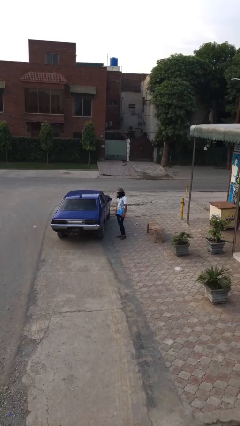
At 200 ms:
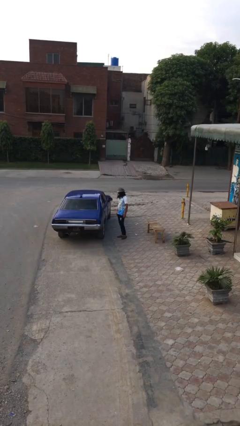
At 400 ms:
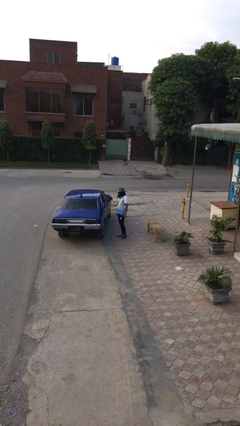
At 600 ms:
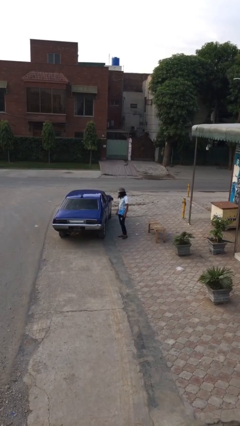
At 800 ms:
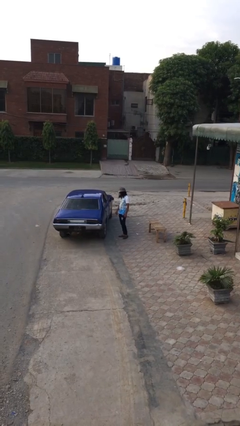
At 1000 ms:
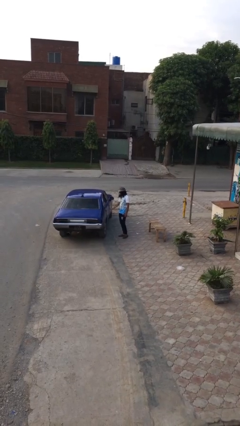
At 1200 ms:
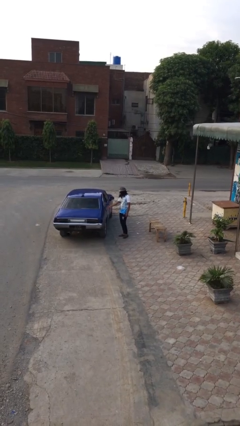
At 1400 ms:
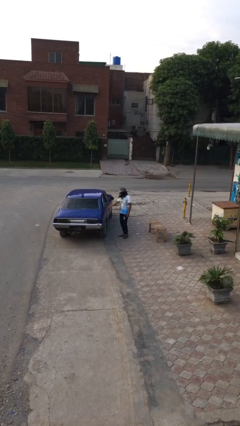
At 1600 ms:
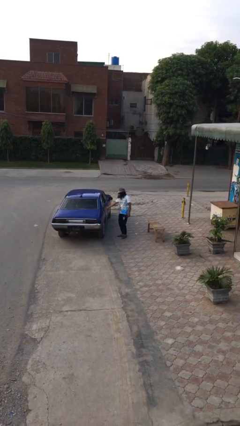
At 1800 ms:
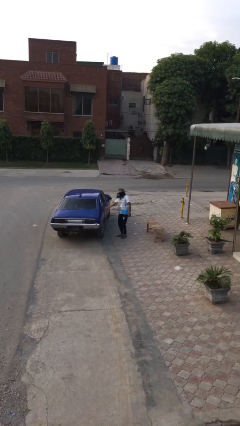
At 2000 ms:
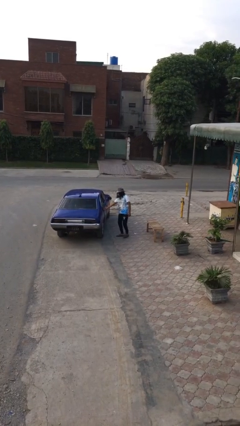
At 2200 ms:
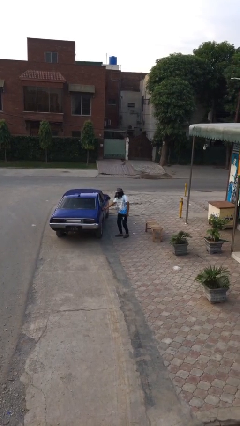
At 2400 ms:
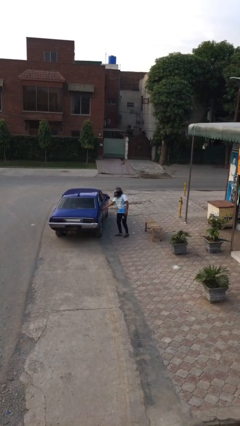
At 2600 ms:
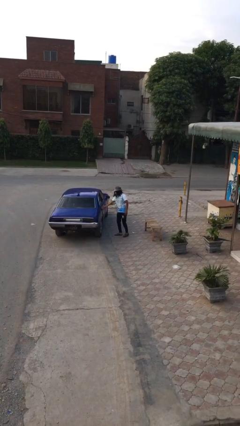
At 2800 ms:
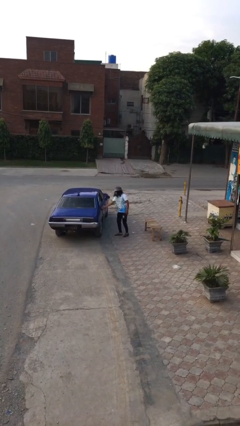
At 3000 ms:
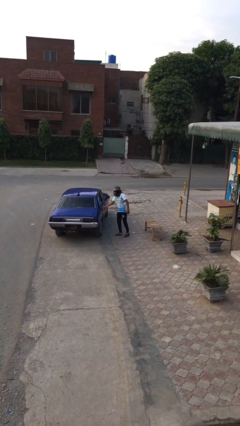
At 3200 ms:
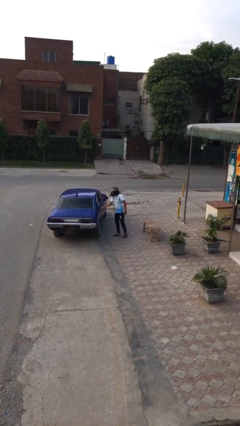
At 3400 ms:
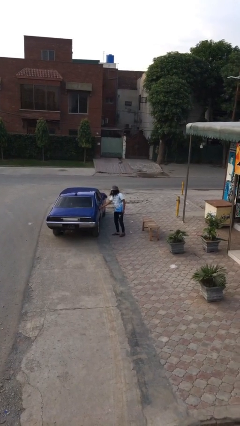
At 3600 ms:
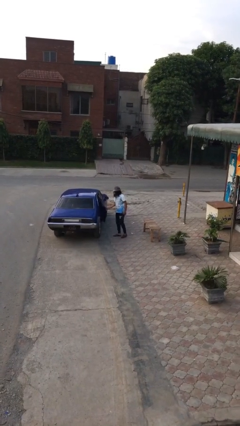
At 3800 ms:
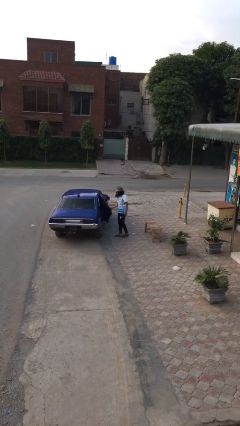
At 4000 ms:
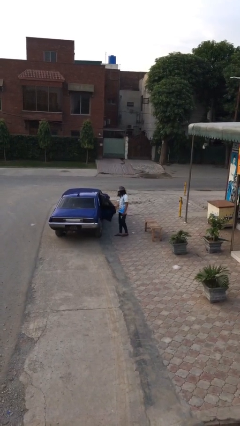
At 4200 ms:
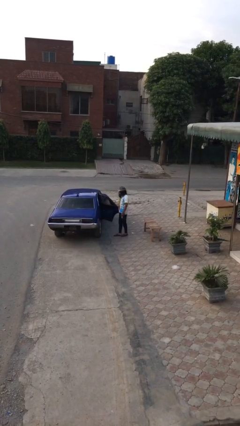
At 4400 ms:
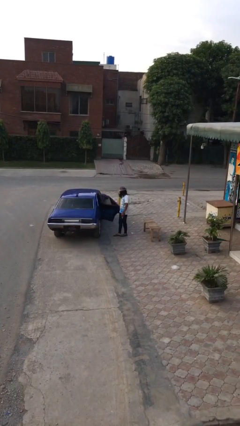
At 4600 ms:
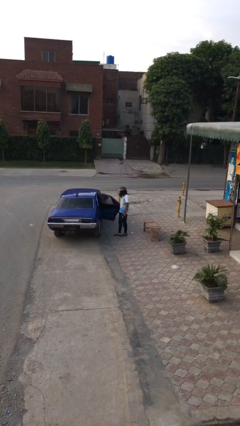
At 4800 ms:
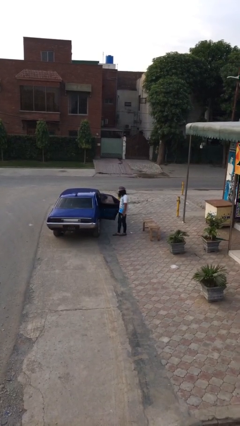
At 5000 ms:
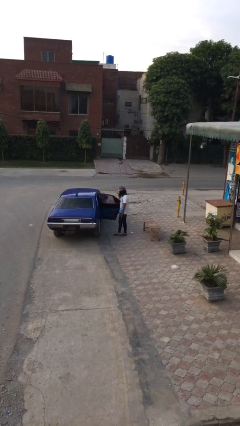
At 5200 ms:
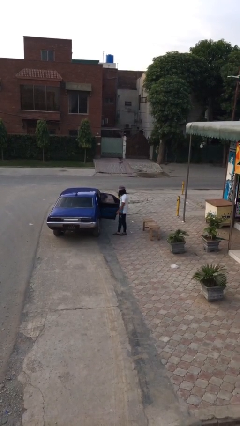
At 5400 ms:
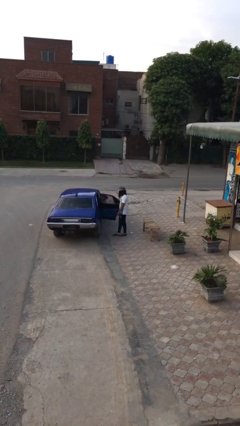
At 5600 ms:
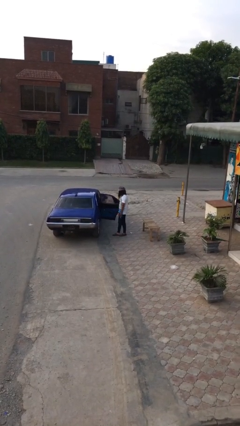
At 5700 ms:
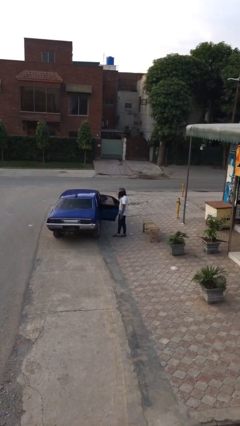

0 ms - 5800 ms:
person opens car door

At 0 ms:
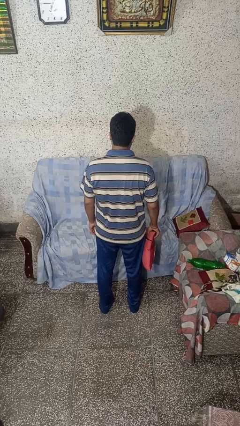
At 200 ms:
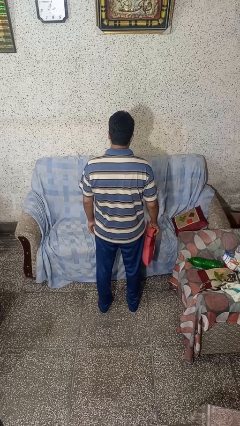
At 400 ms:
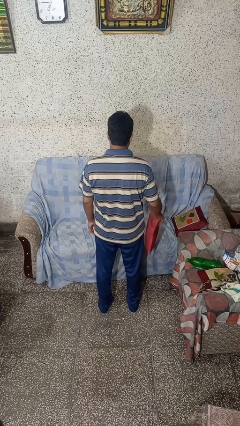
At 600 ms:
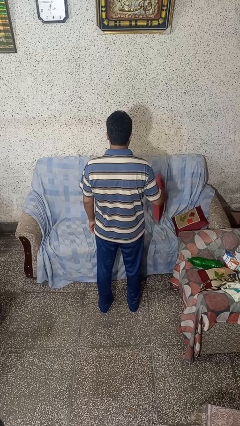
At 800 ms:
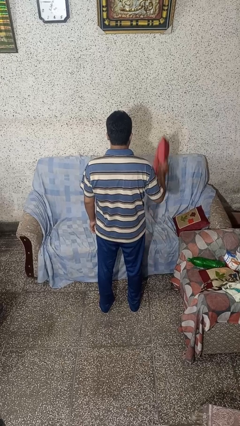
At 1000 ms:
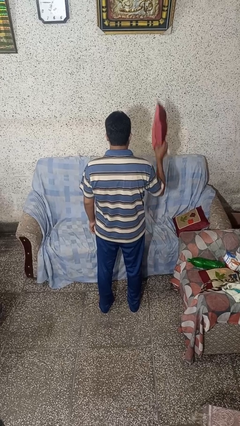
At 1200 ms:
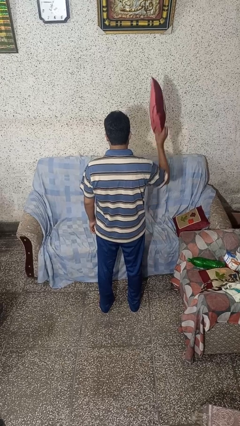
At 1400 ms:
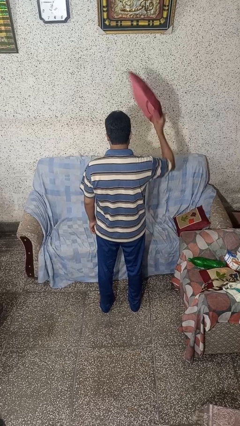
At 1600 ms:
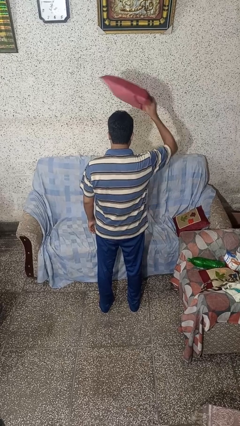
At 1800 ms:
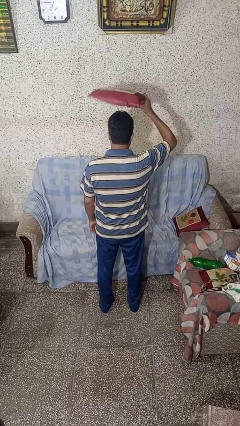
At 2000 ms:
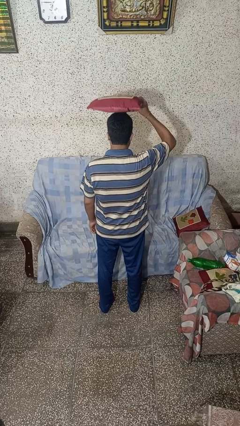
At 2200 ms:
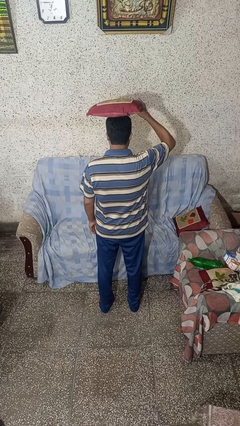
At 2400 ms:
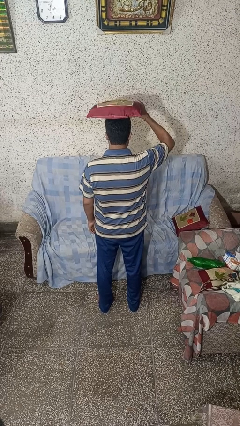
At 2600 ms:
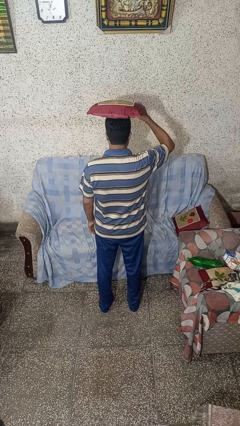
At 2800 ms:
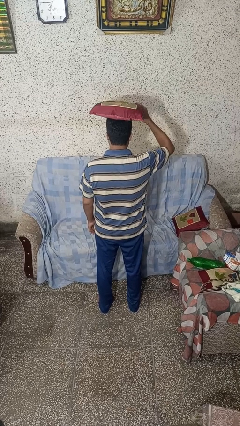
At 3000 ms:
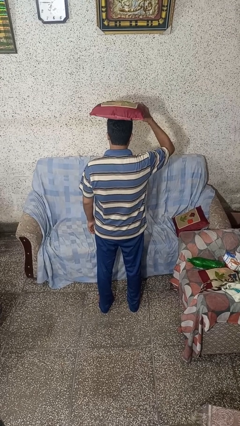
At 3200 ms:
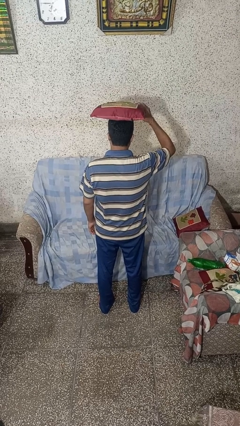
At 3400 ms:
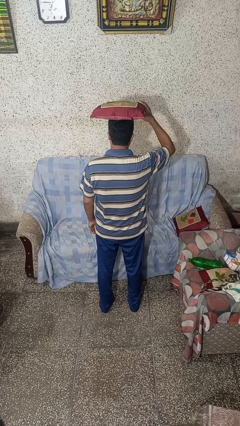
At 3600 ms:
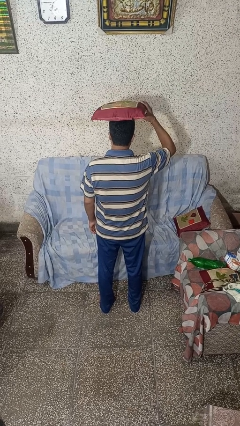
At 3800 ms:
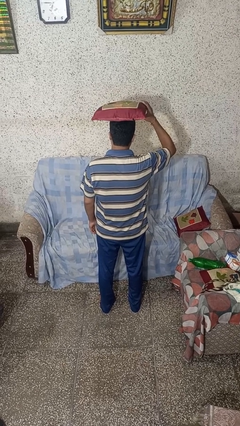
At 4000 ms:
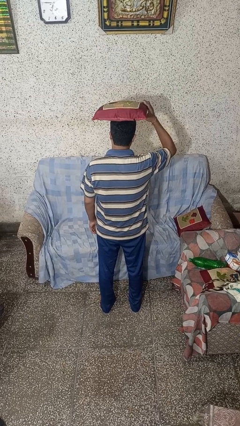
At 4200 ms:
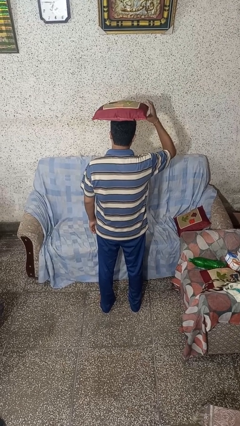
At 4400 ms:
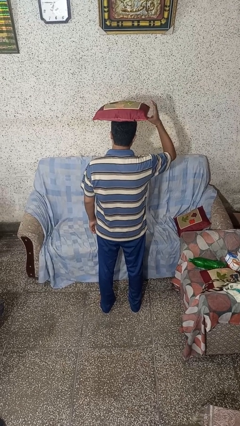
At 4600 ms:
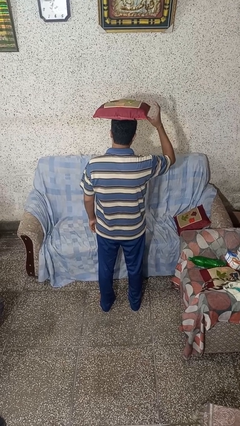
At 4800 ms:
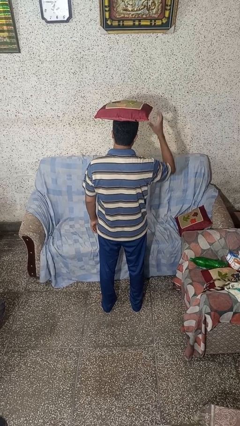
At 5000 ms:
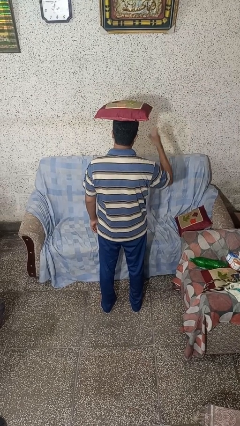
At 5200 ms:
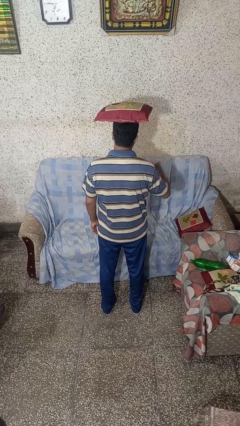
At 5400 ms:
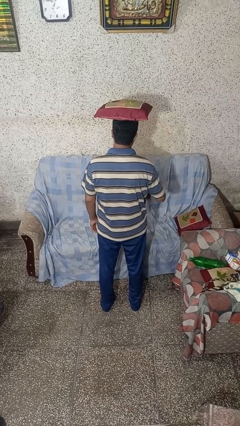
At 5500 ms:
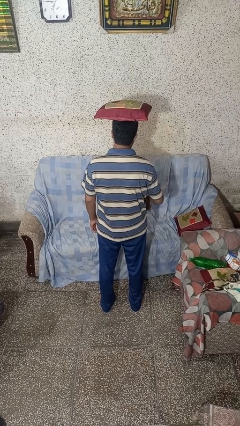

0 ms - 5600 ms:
person holds object above head

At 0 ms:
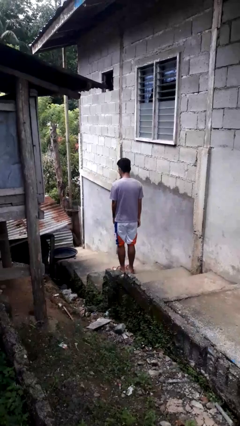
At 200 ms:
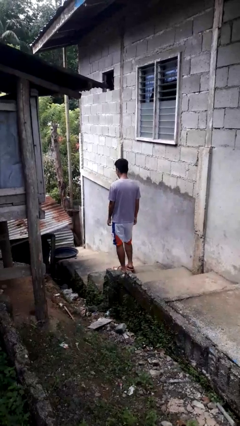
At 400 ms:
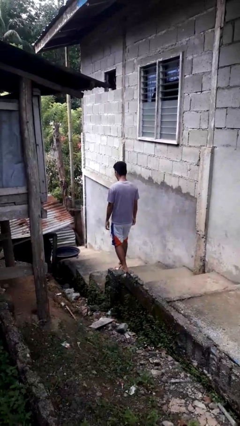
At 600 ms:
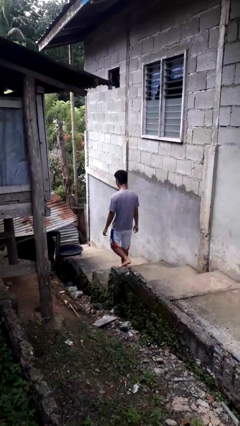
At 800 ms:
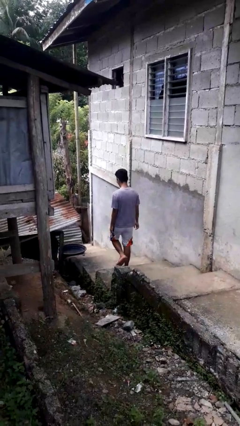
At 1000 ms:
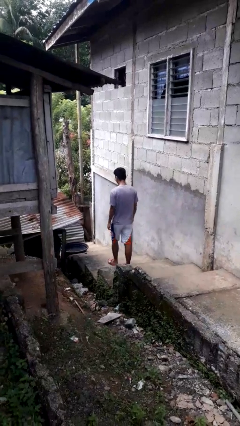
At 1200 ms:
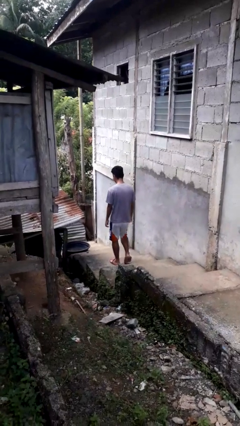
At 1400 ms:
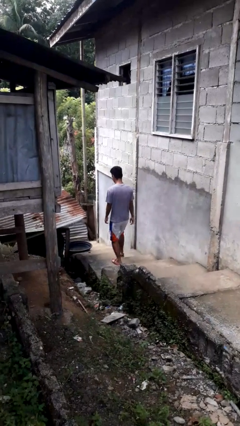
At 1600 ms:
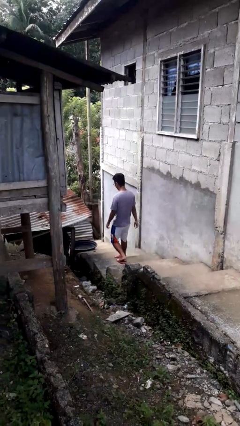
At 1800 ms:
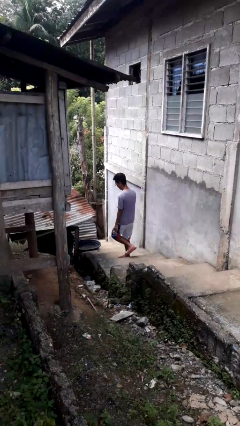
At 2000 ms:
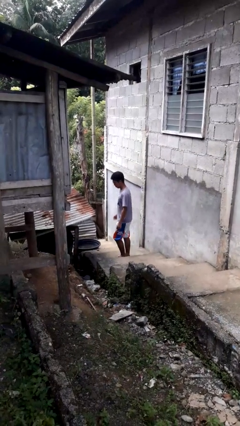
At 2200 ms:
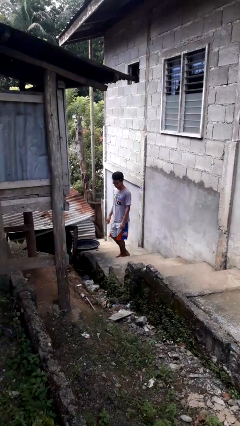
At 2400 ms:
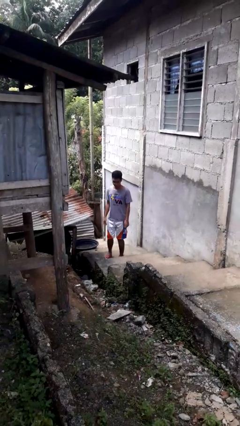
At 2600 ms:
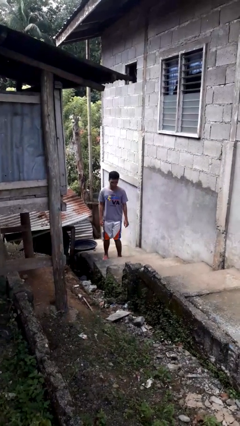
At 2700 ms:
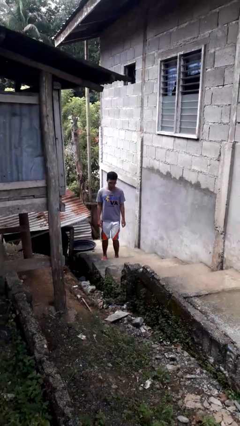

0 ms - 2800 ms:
person climbs down stairs

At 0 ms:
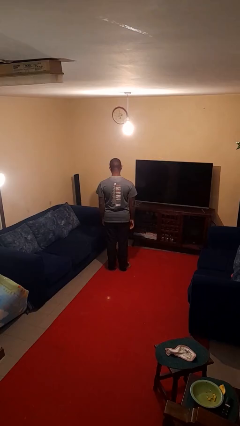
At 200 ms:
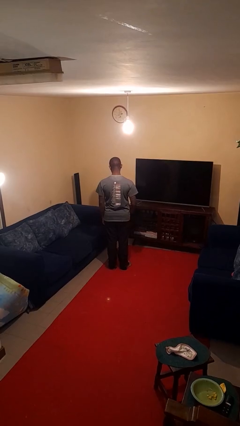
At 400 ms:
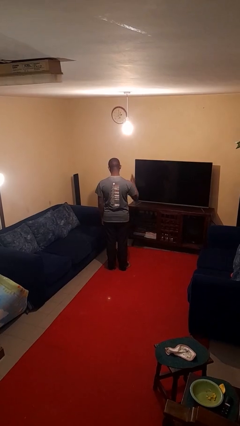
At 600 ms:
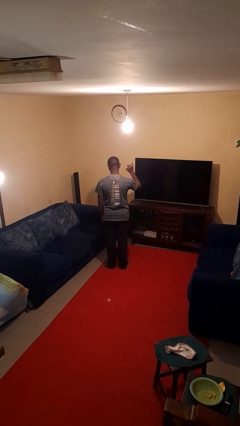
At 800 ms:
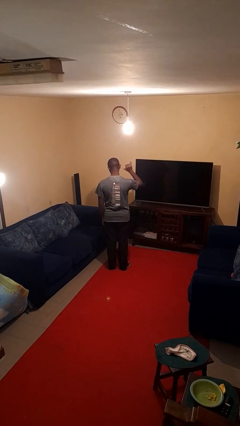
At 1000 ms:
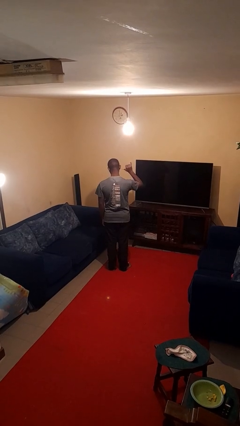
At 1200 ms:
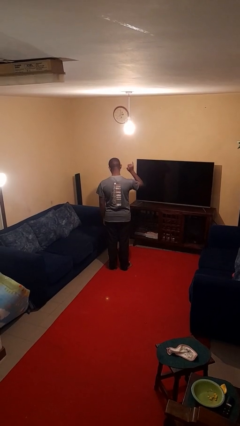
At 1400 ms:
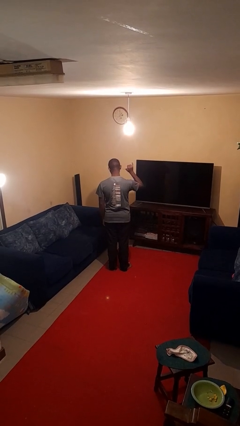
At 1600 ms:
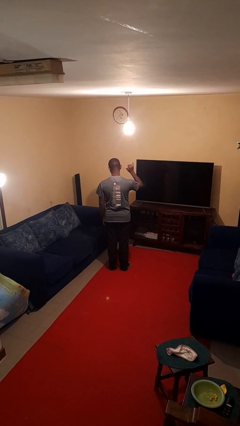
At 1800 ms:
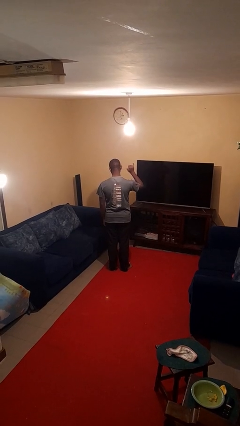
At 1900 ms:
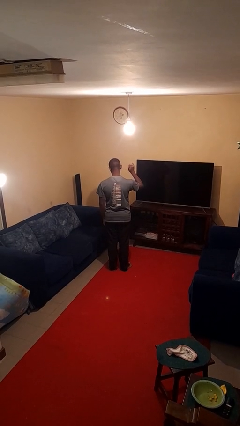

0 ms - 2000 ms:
person gestures hang loose

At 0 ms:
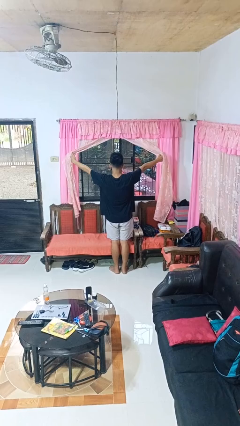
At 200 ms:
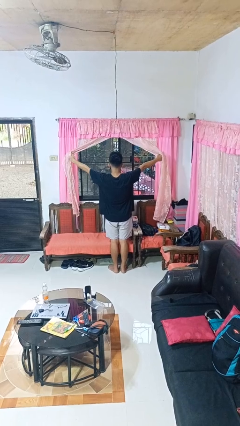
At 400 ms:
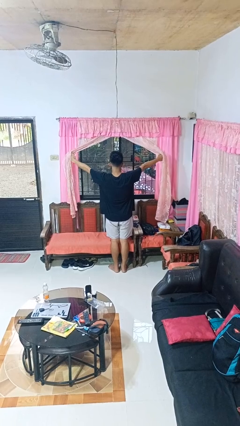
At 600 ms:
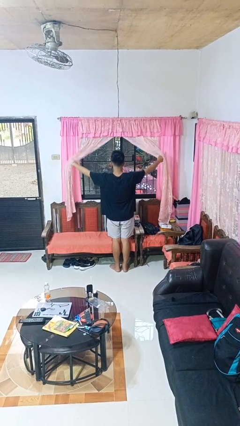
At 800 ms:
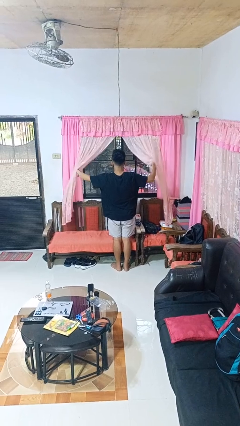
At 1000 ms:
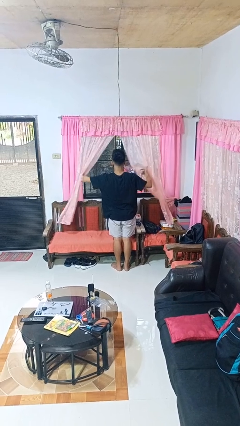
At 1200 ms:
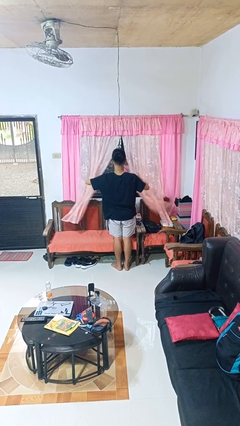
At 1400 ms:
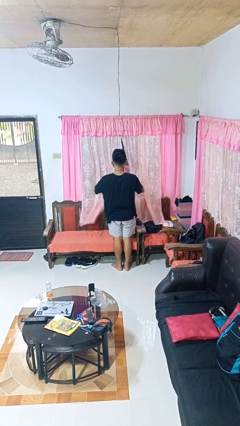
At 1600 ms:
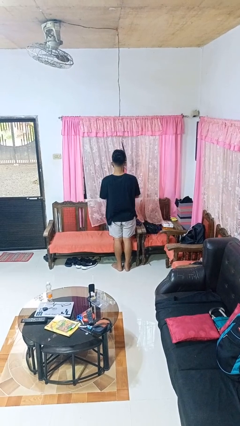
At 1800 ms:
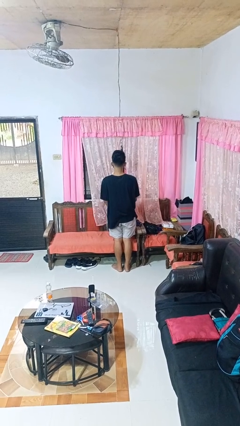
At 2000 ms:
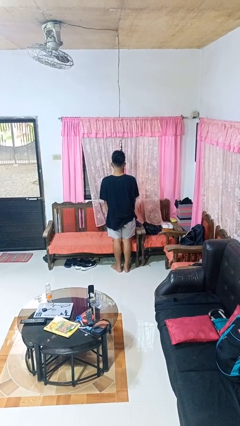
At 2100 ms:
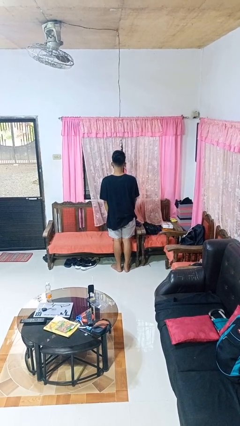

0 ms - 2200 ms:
person closes curtains
